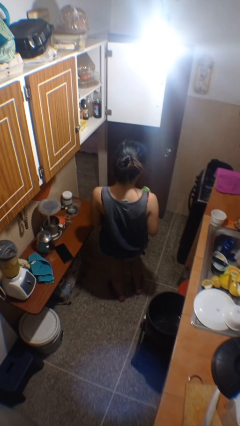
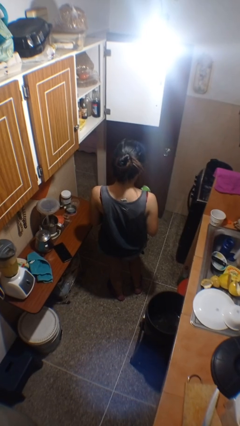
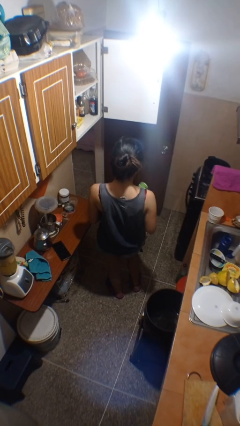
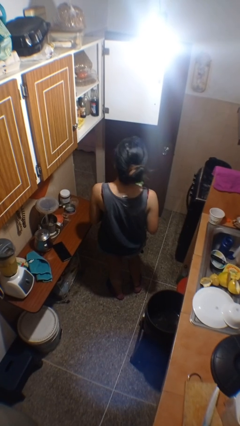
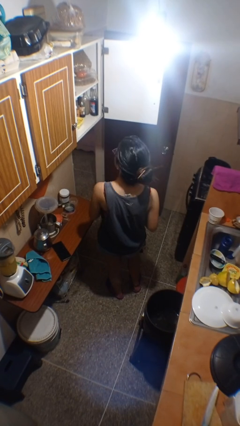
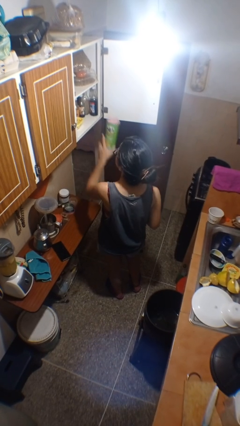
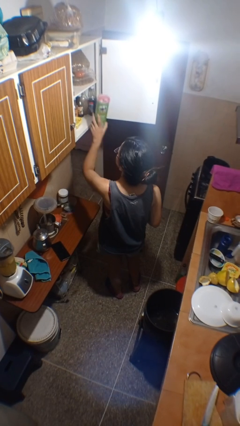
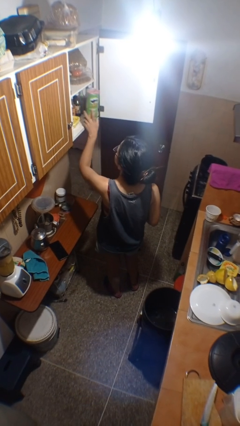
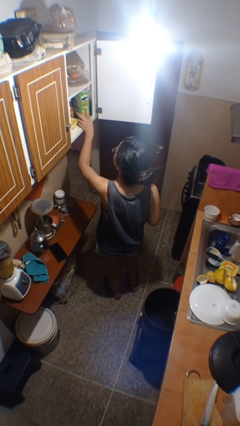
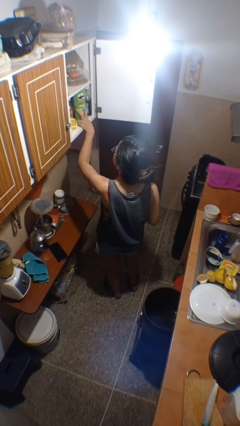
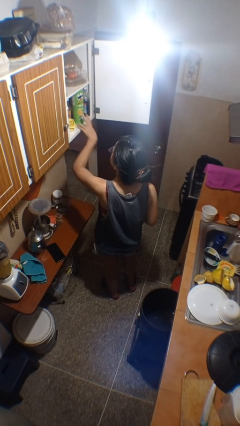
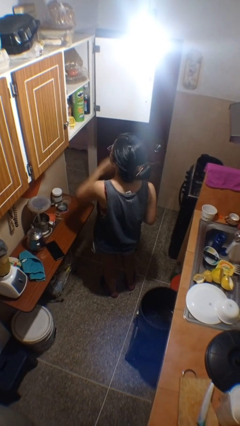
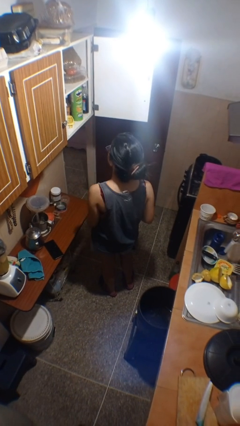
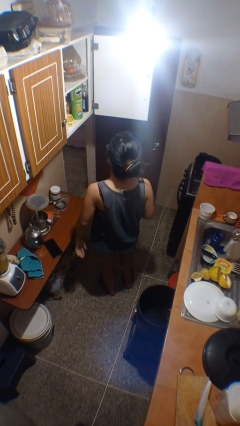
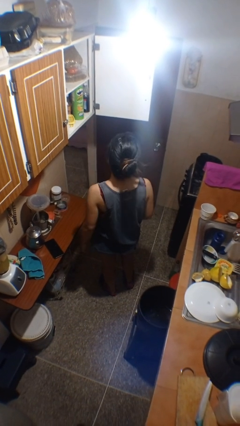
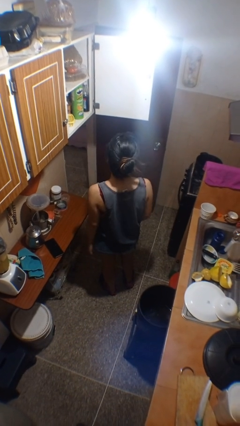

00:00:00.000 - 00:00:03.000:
person puts object in cabinet

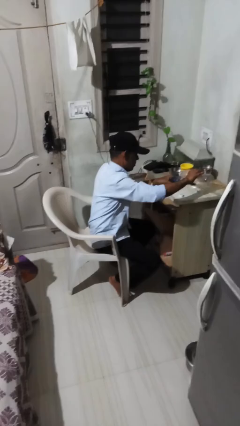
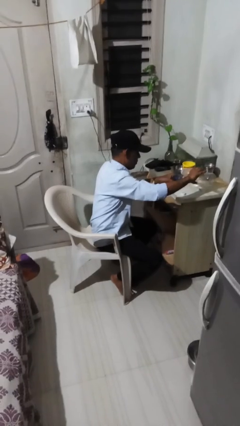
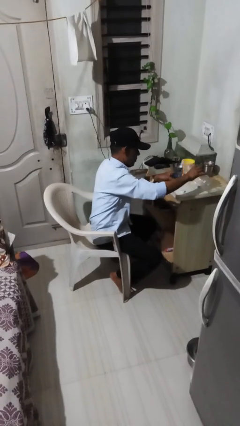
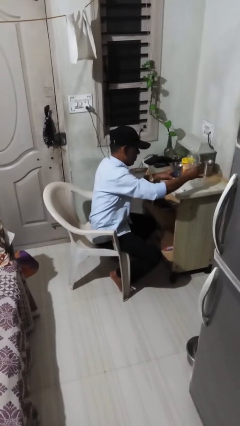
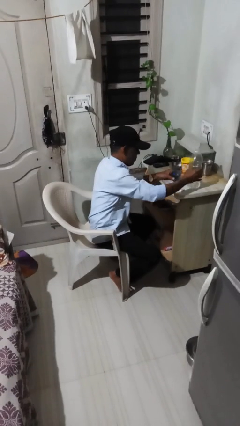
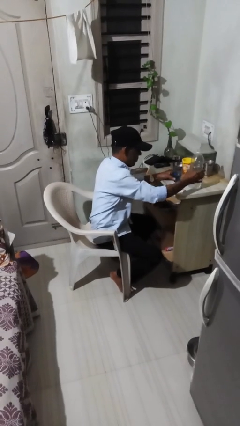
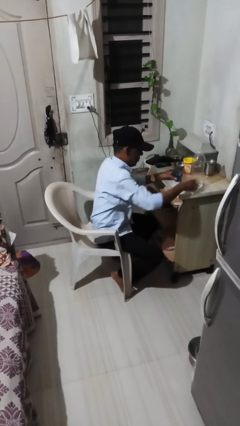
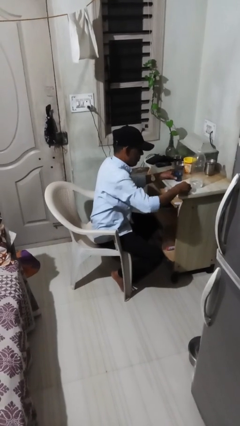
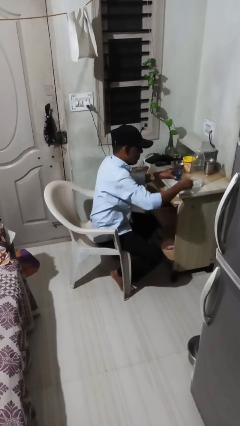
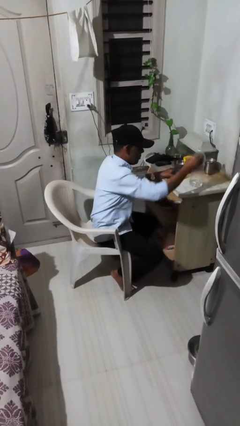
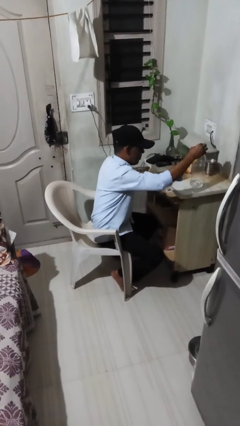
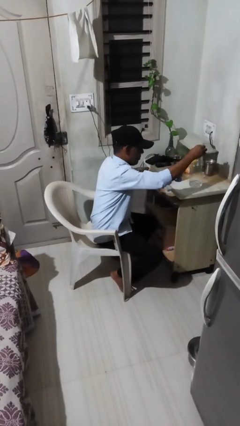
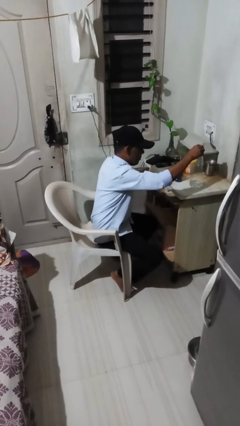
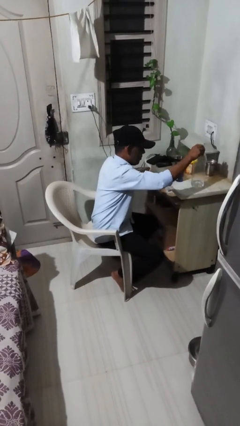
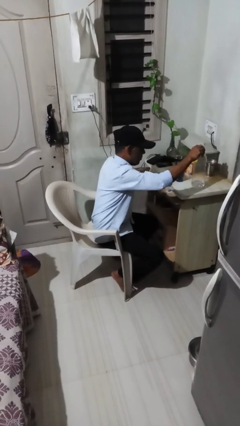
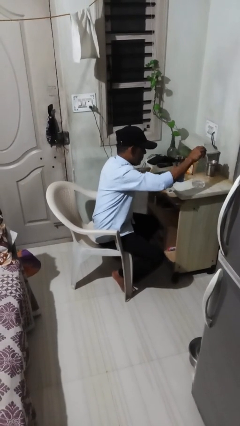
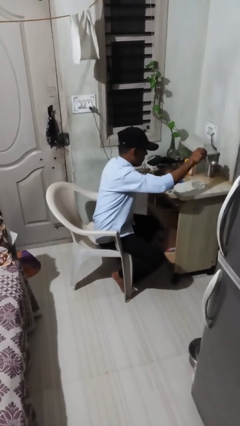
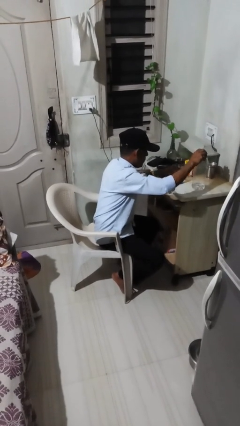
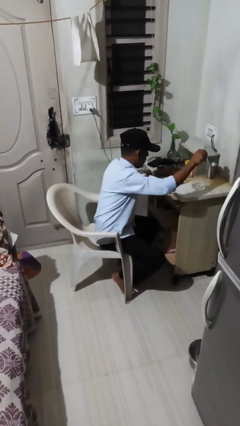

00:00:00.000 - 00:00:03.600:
person screws lid to bottle

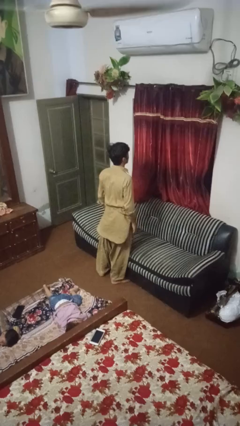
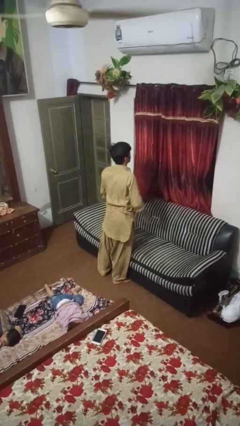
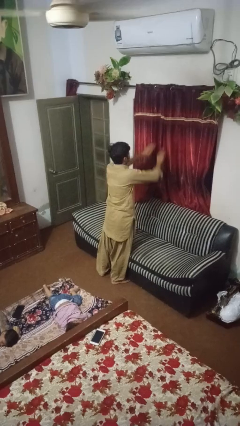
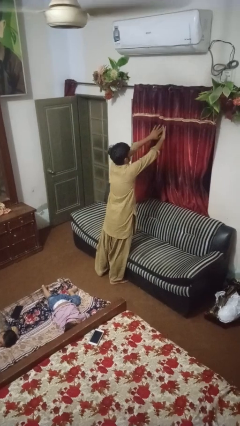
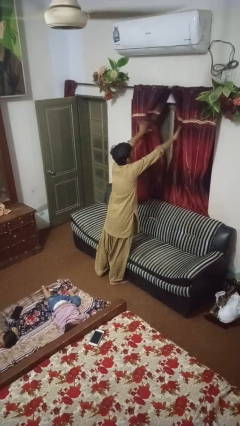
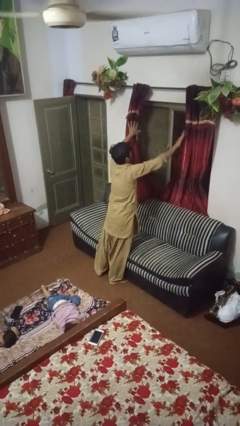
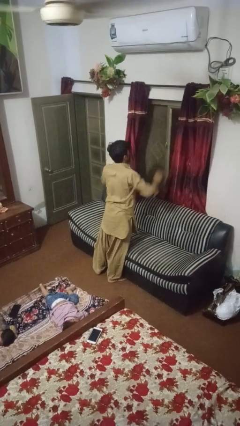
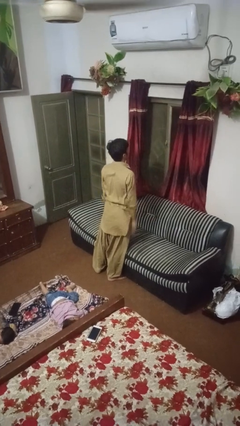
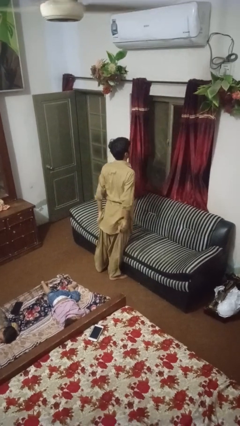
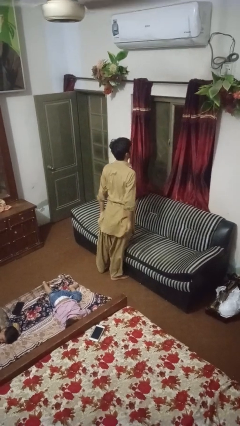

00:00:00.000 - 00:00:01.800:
person opens curtains

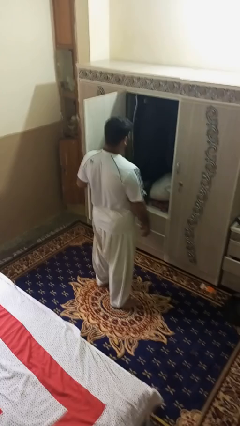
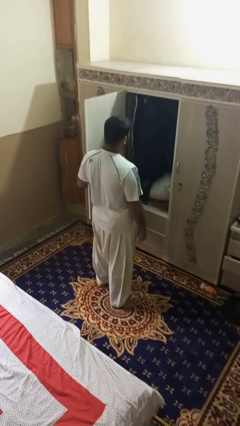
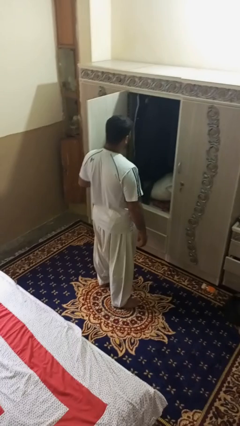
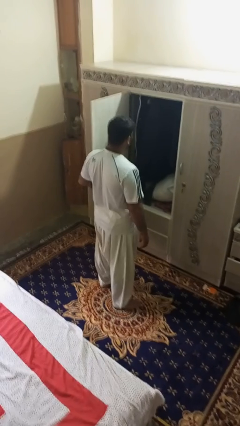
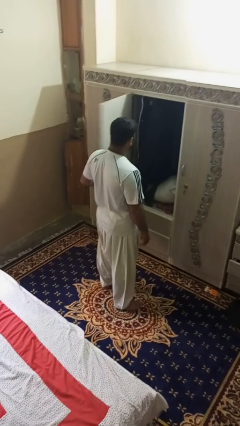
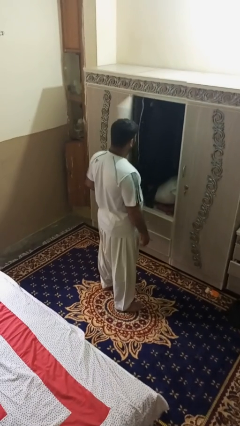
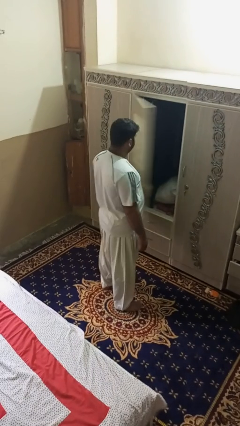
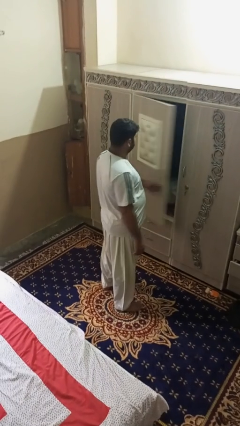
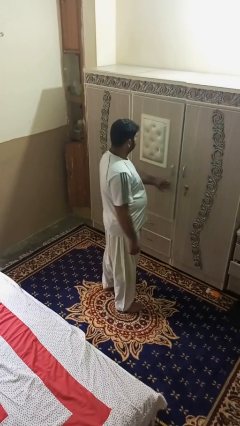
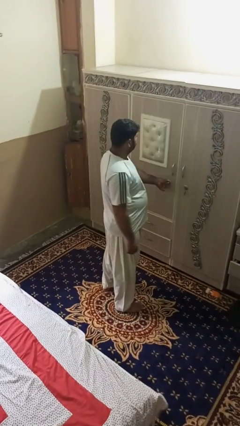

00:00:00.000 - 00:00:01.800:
person closes dresser drawer

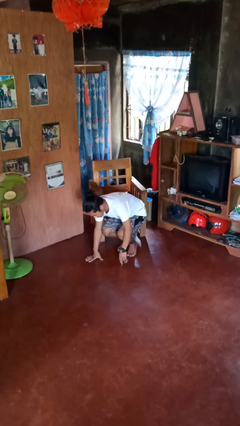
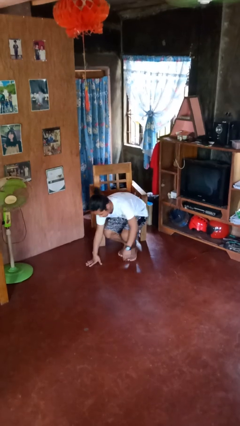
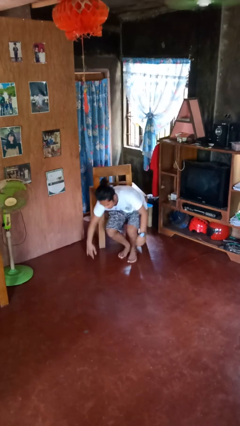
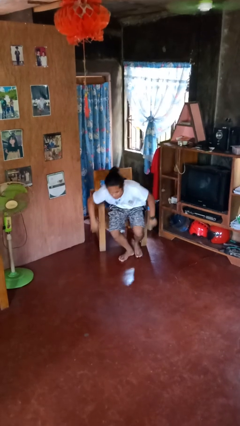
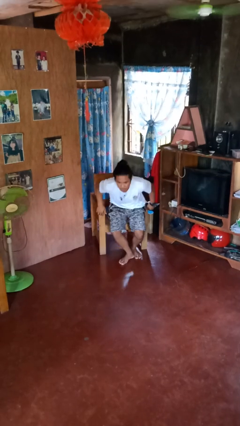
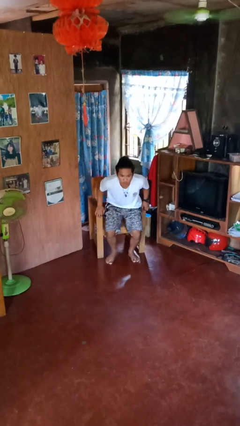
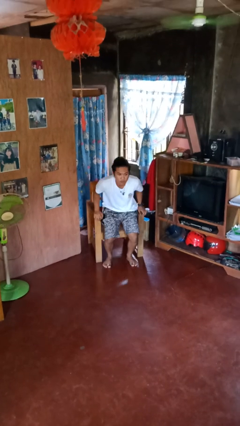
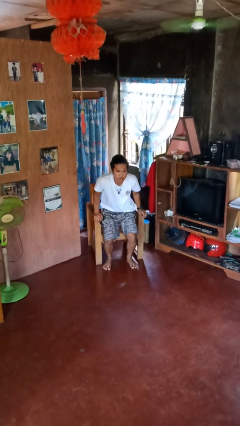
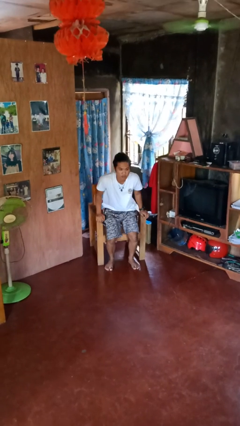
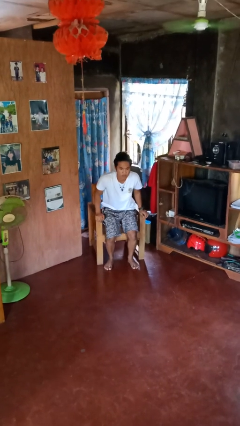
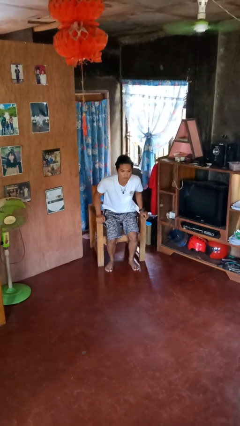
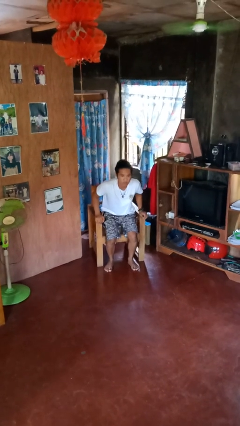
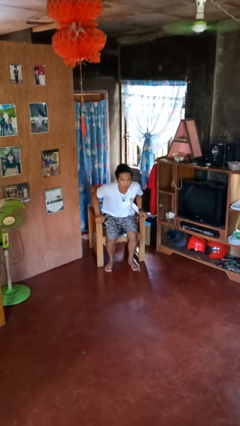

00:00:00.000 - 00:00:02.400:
person stands up from floor

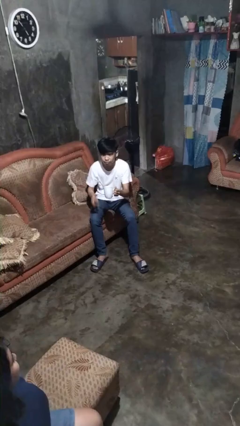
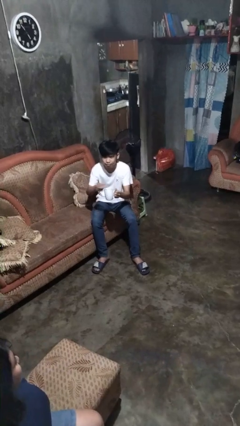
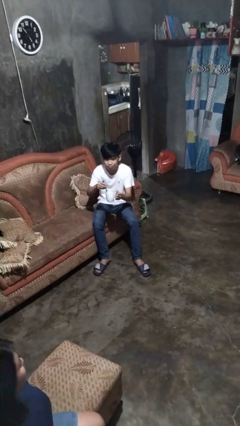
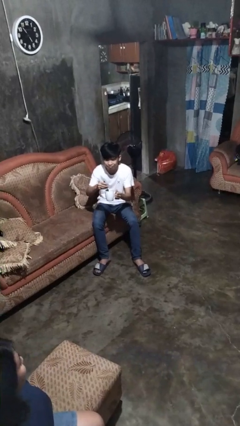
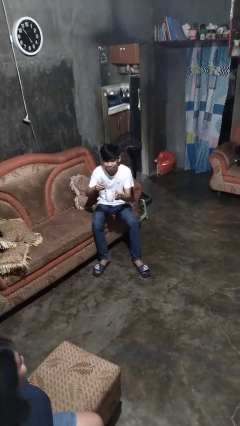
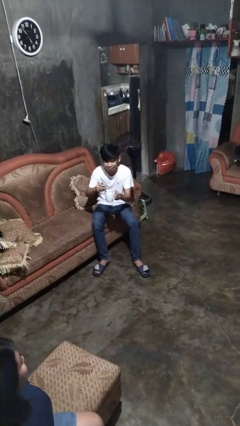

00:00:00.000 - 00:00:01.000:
person drinks from mug

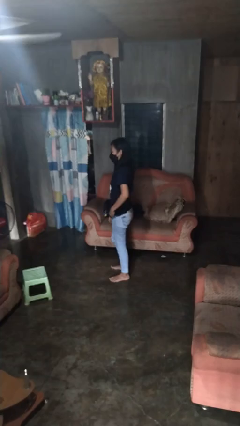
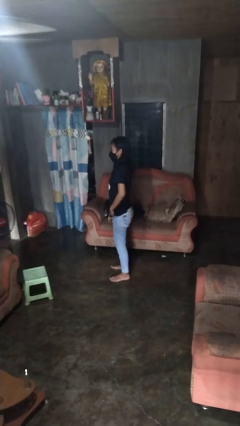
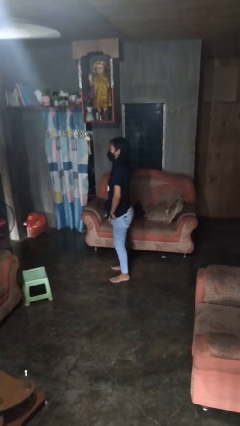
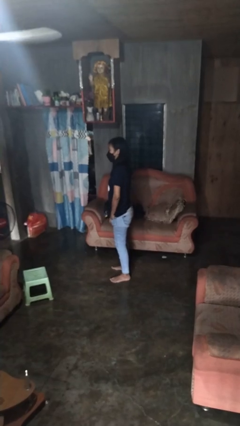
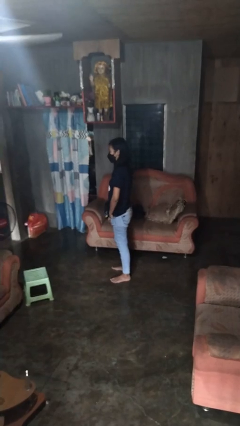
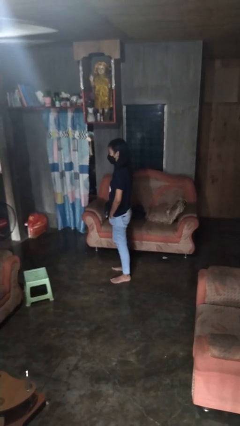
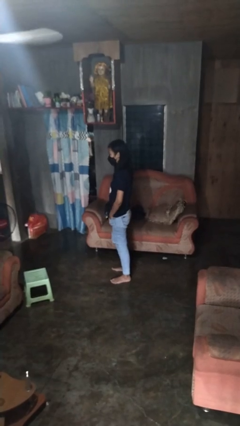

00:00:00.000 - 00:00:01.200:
person puts hands in back pockets

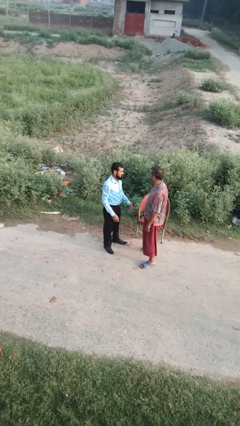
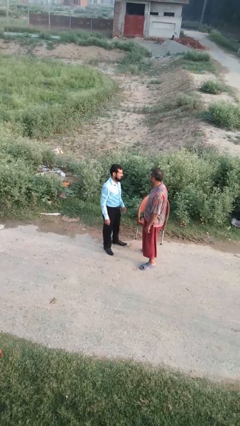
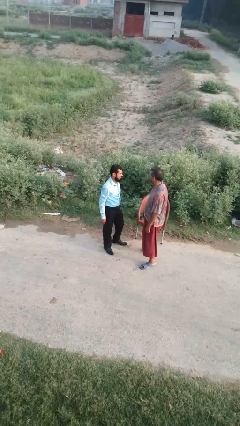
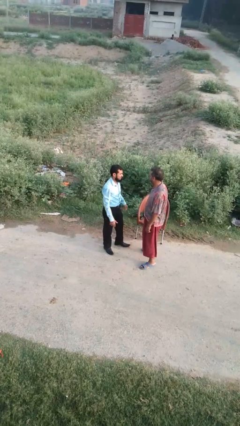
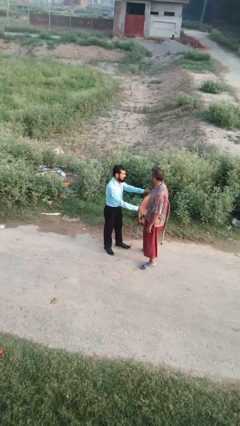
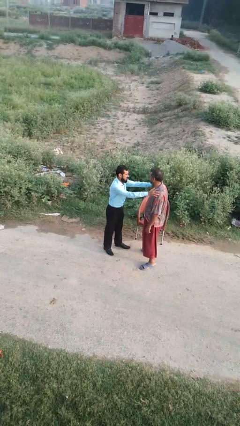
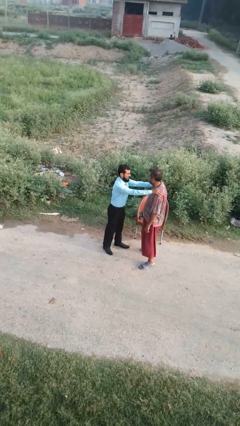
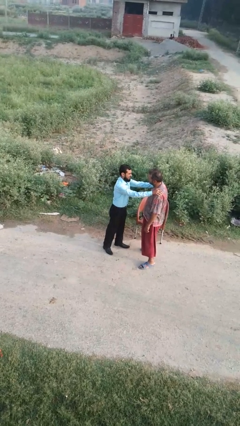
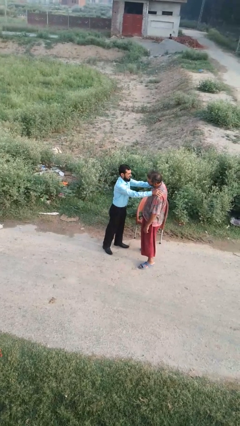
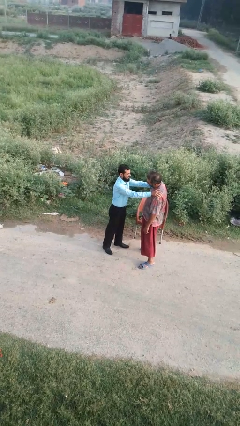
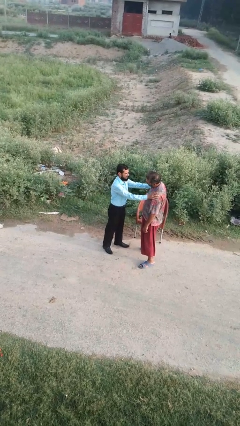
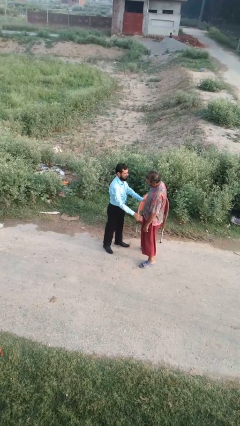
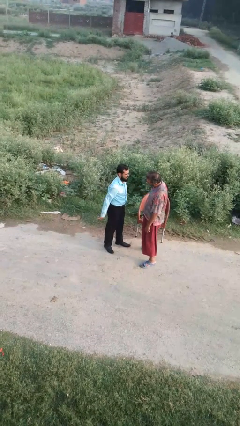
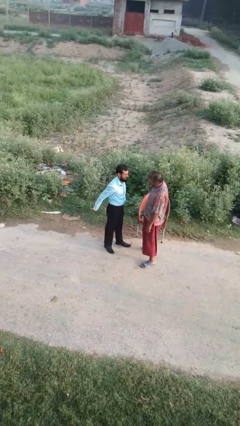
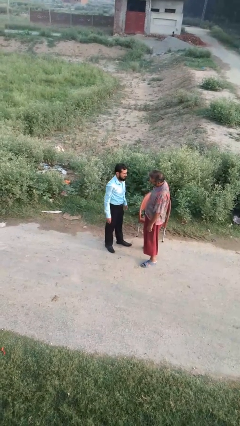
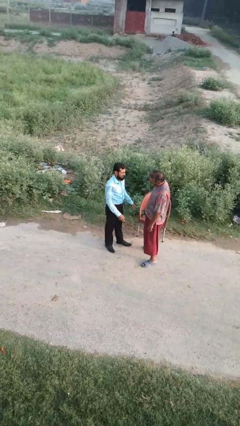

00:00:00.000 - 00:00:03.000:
person pounds shoulders of person
